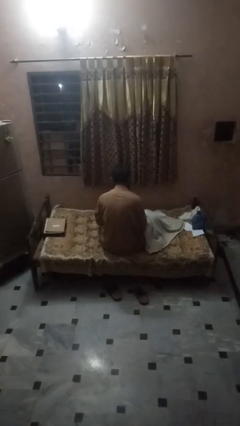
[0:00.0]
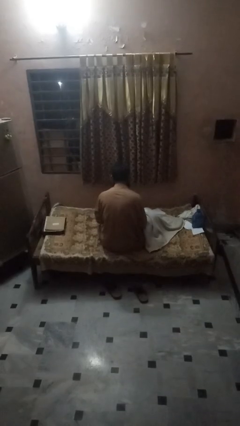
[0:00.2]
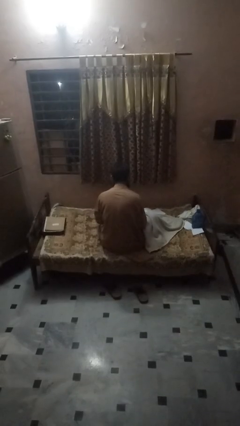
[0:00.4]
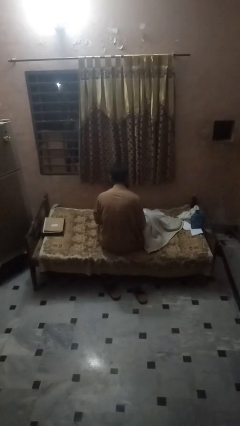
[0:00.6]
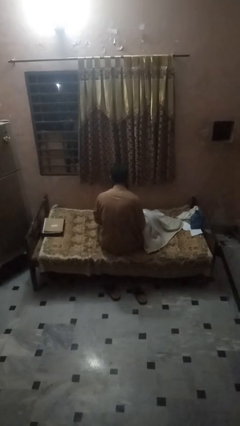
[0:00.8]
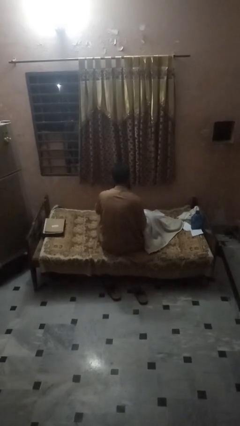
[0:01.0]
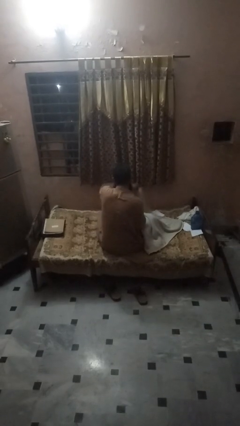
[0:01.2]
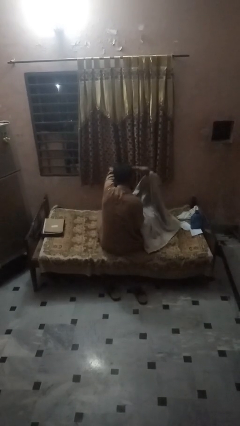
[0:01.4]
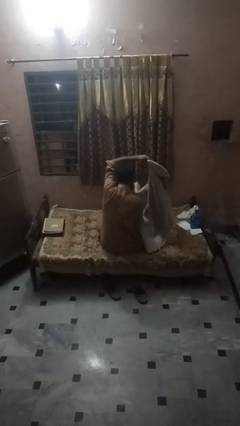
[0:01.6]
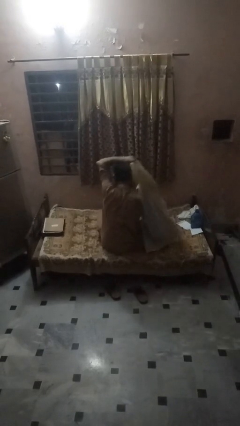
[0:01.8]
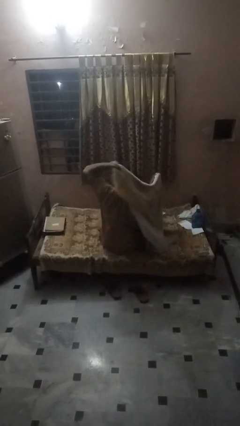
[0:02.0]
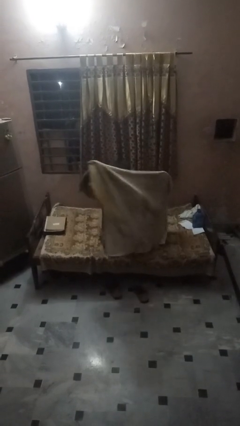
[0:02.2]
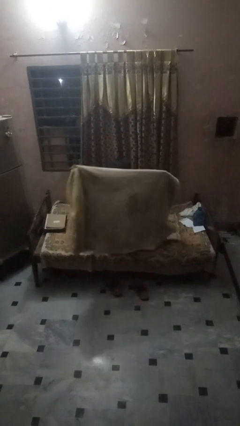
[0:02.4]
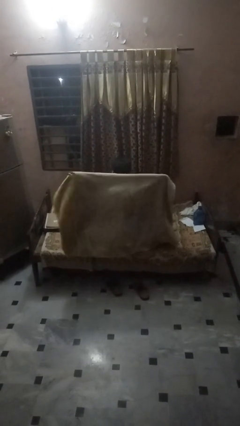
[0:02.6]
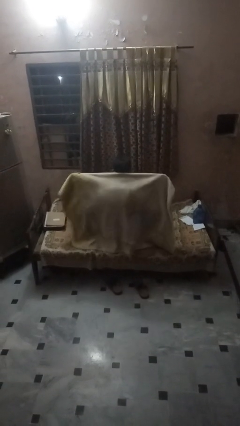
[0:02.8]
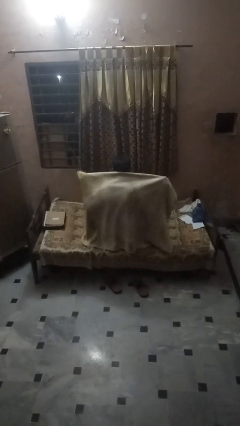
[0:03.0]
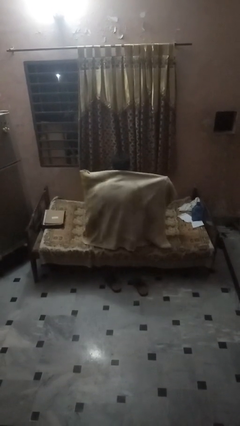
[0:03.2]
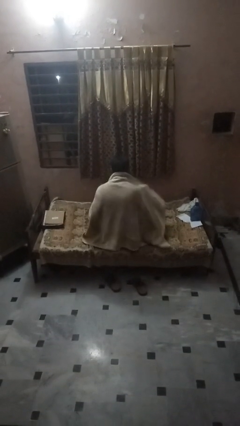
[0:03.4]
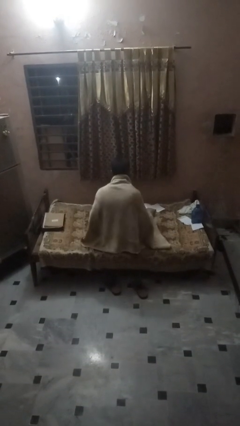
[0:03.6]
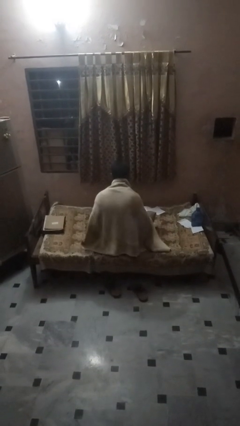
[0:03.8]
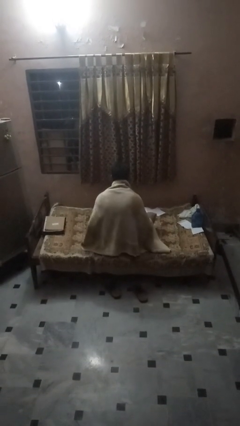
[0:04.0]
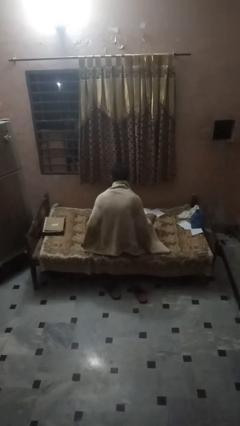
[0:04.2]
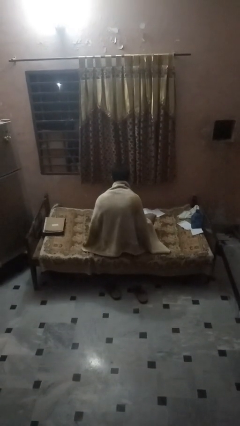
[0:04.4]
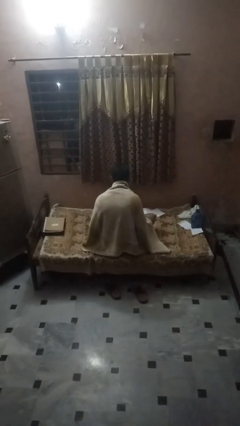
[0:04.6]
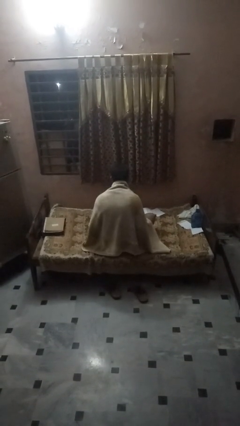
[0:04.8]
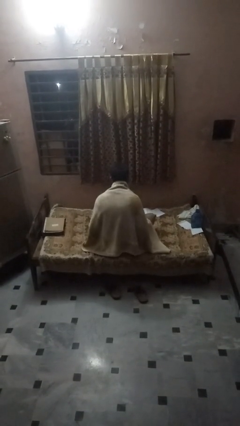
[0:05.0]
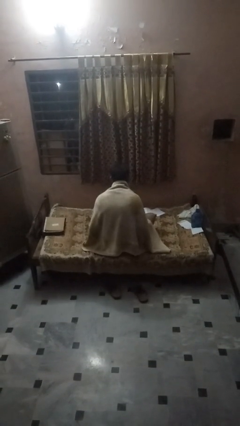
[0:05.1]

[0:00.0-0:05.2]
person covers with blanket

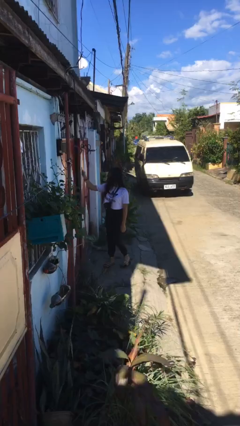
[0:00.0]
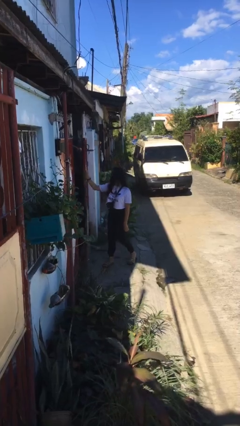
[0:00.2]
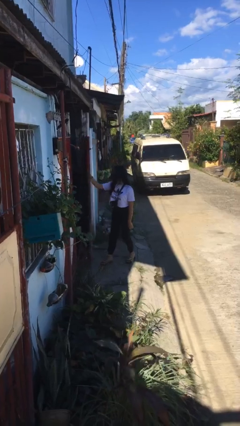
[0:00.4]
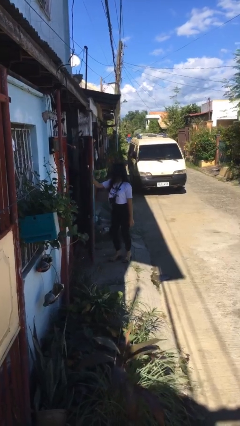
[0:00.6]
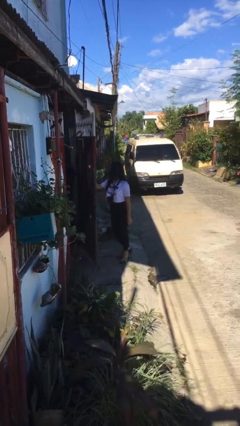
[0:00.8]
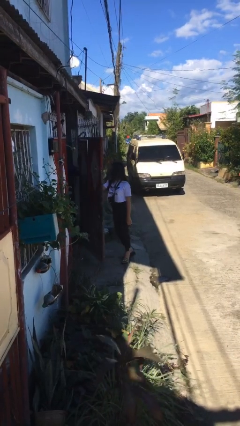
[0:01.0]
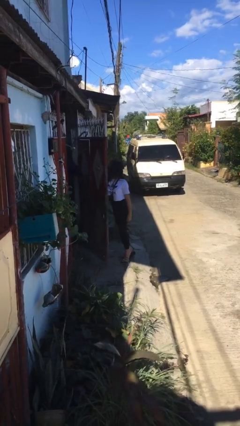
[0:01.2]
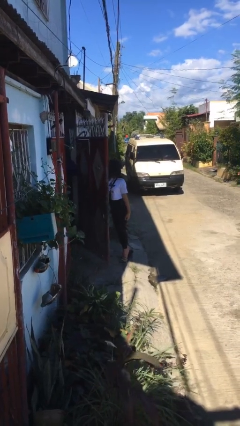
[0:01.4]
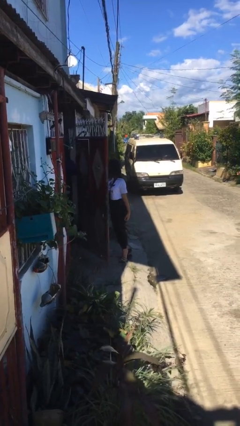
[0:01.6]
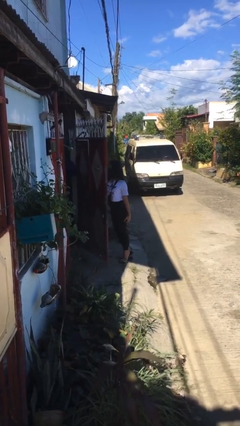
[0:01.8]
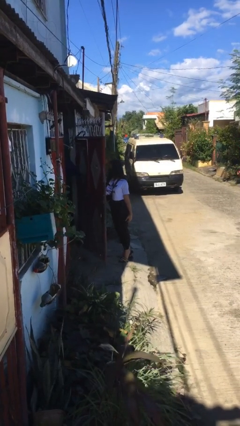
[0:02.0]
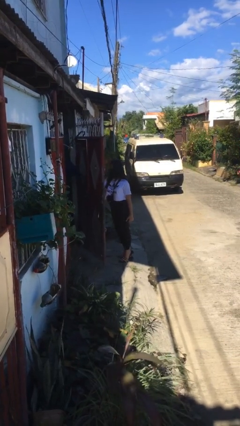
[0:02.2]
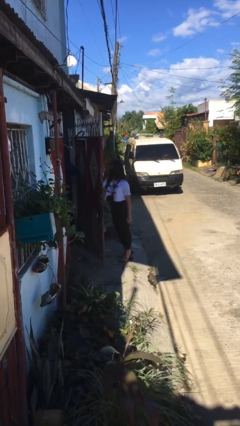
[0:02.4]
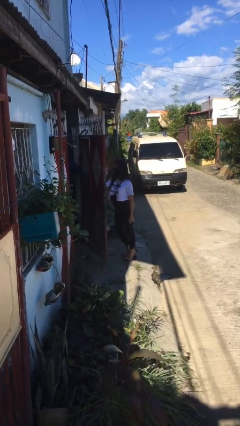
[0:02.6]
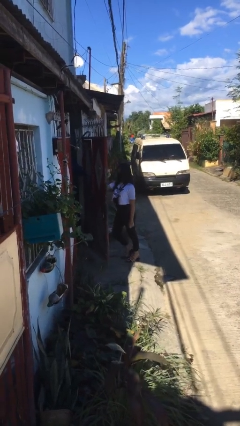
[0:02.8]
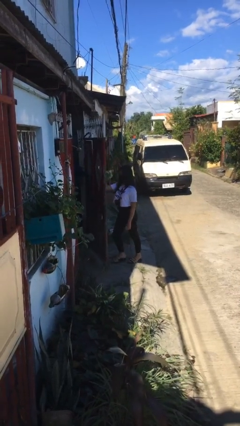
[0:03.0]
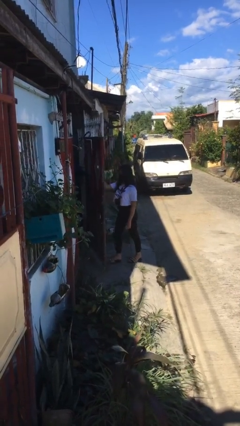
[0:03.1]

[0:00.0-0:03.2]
person opens gate

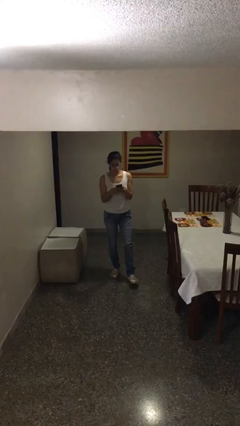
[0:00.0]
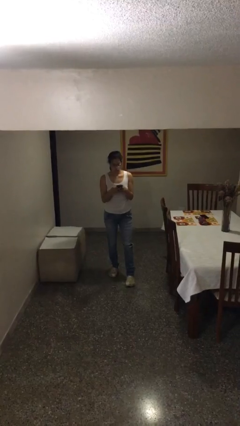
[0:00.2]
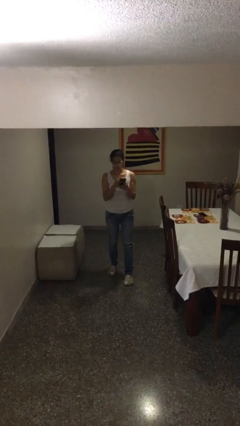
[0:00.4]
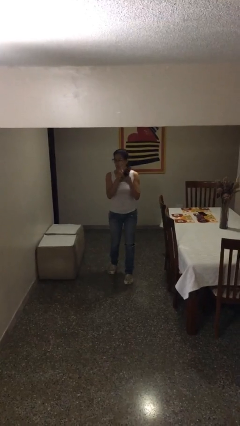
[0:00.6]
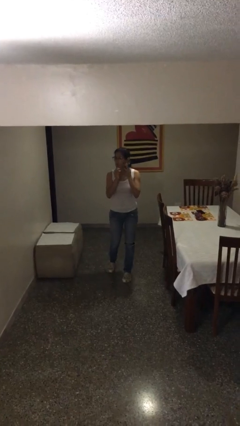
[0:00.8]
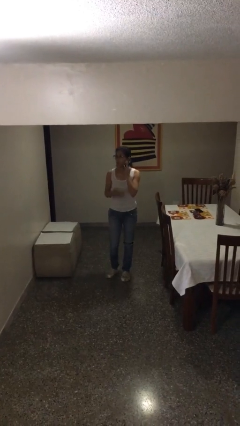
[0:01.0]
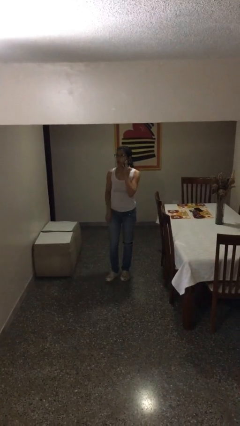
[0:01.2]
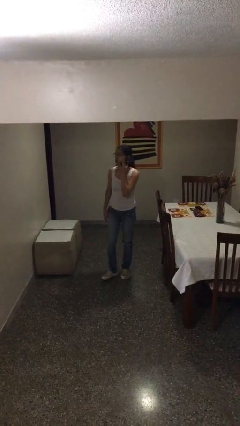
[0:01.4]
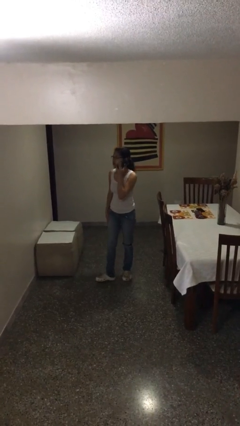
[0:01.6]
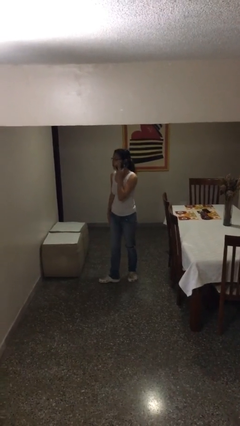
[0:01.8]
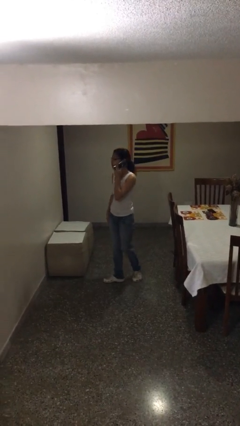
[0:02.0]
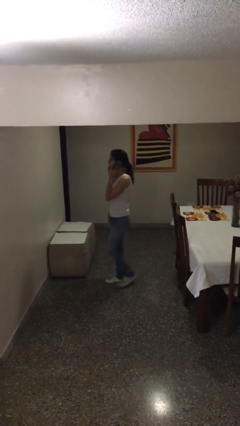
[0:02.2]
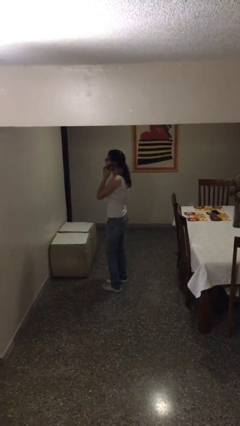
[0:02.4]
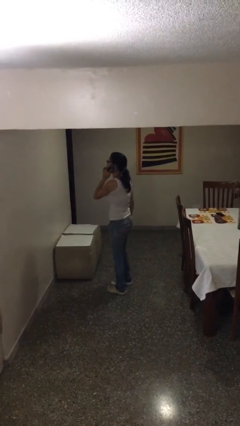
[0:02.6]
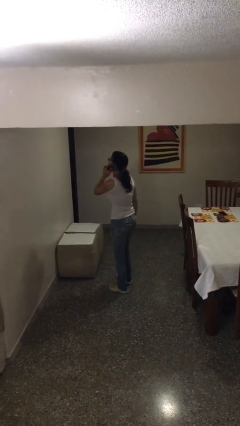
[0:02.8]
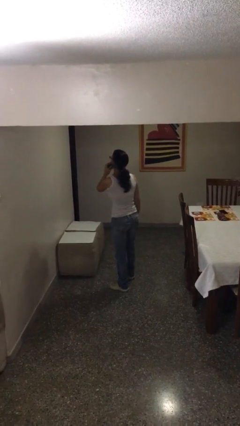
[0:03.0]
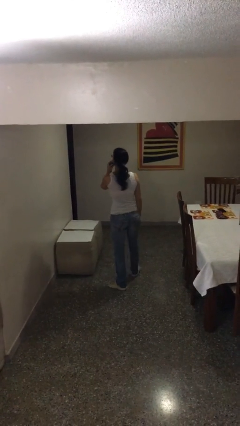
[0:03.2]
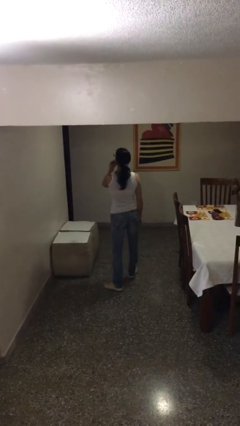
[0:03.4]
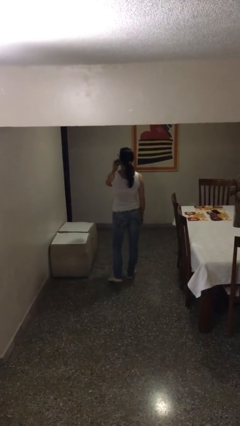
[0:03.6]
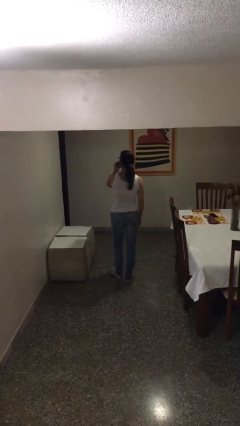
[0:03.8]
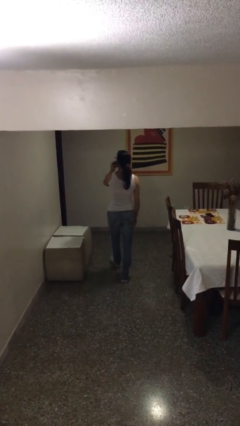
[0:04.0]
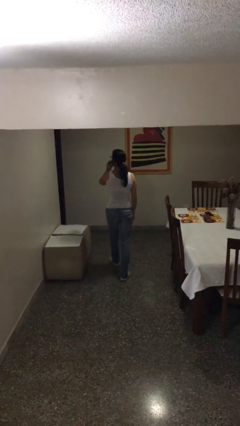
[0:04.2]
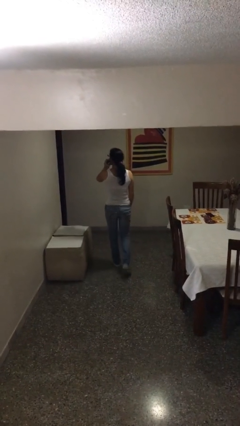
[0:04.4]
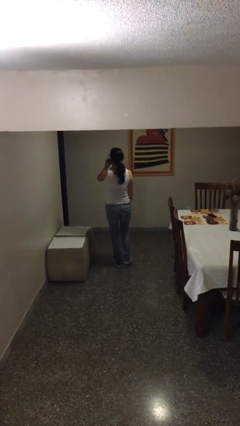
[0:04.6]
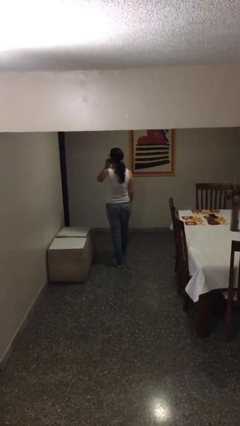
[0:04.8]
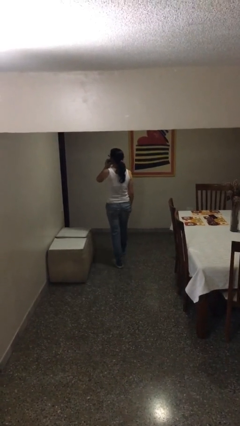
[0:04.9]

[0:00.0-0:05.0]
person talks on phone

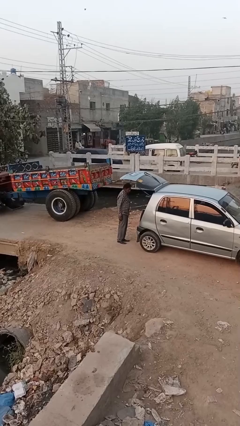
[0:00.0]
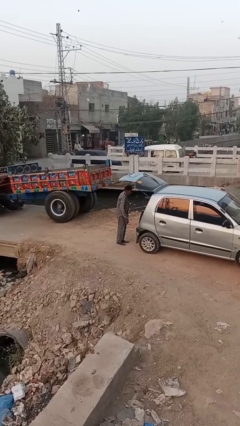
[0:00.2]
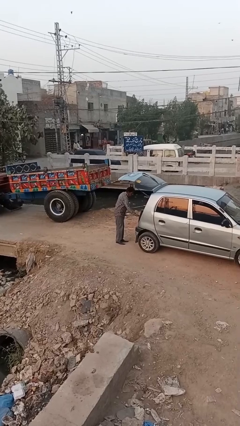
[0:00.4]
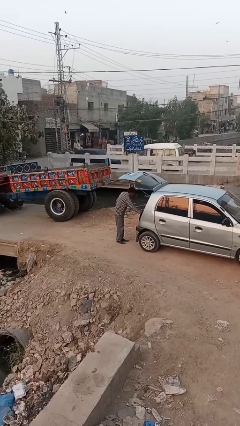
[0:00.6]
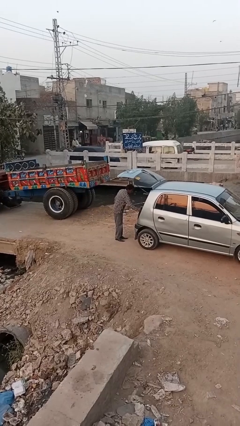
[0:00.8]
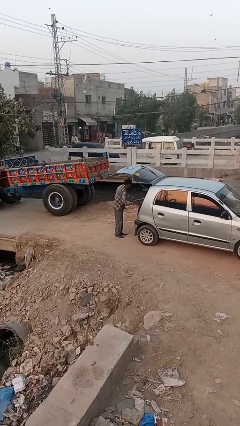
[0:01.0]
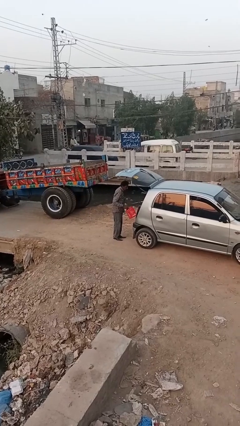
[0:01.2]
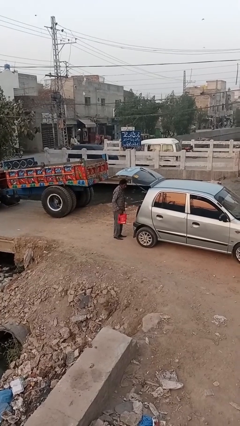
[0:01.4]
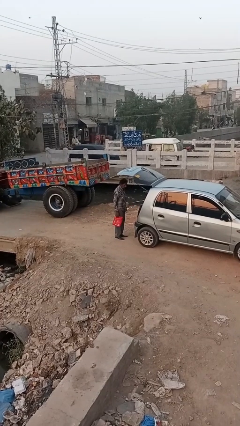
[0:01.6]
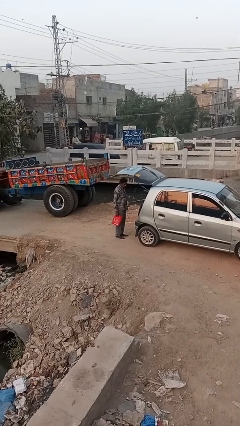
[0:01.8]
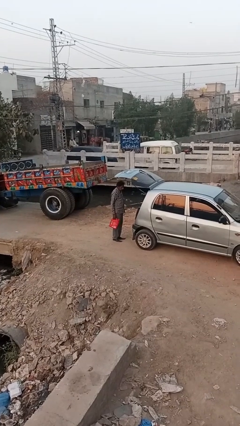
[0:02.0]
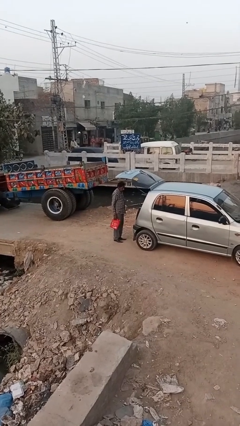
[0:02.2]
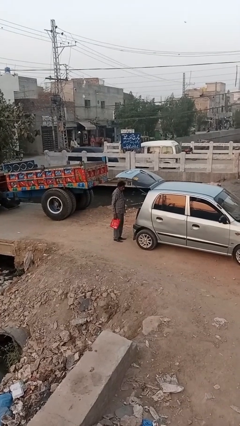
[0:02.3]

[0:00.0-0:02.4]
person unloads car

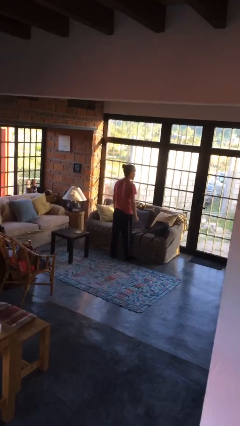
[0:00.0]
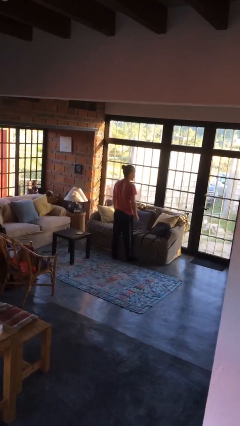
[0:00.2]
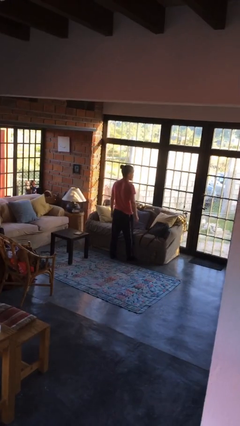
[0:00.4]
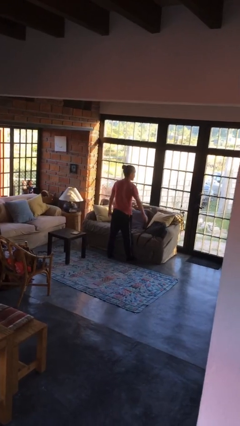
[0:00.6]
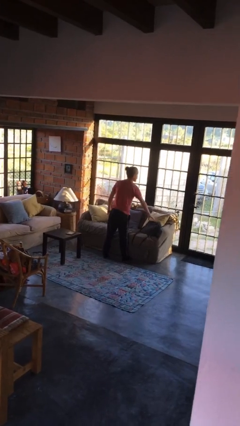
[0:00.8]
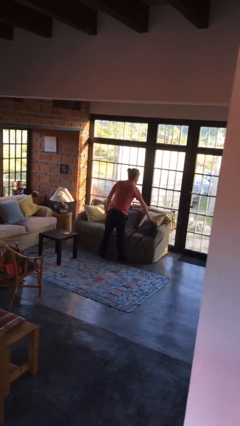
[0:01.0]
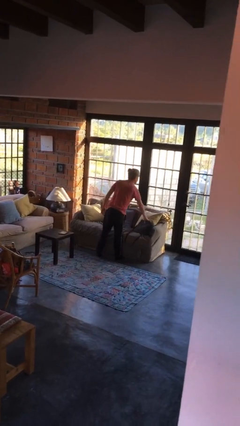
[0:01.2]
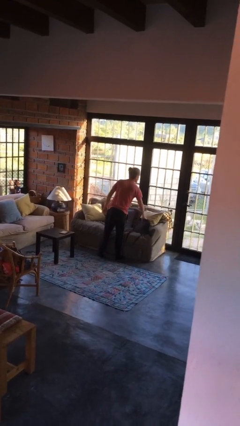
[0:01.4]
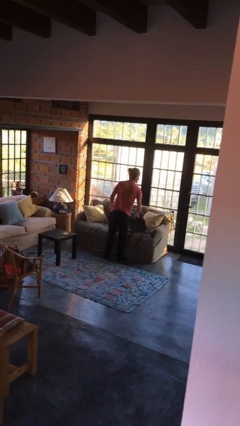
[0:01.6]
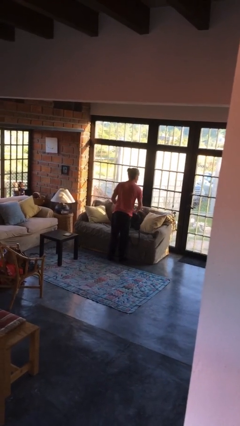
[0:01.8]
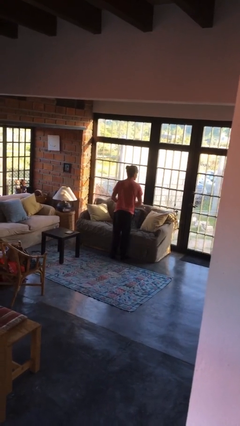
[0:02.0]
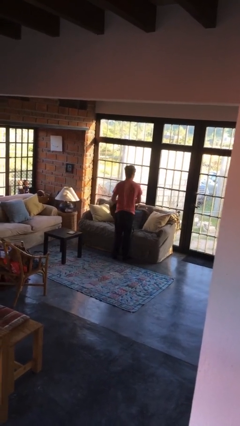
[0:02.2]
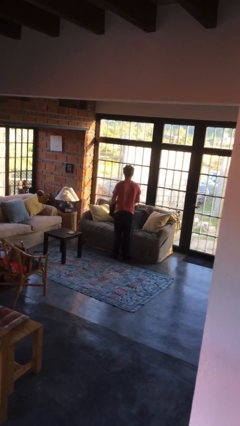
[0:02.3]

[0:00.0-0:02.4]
person picks up object from couch
